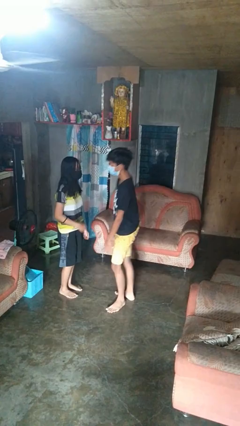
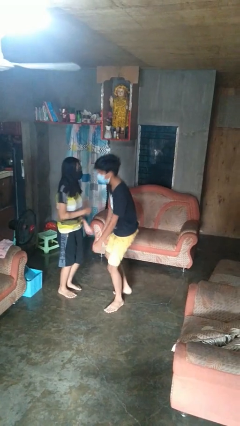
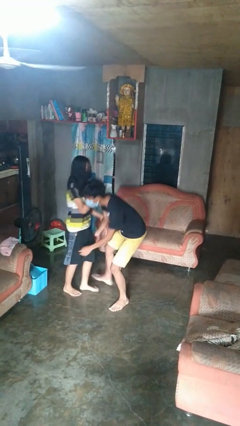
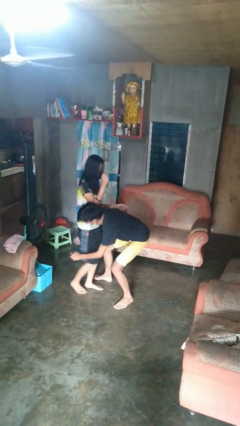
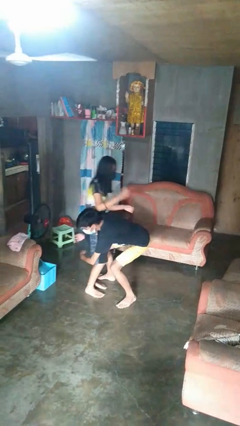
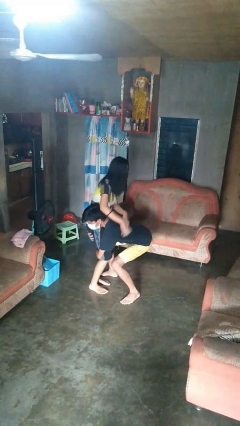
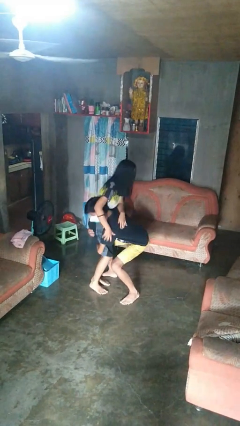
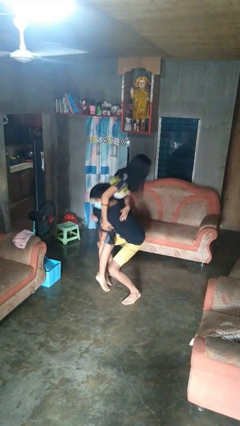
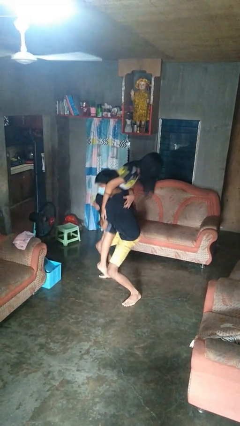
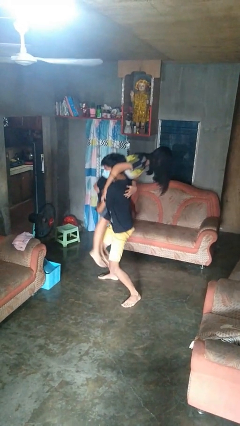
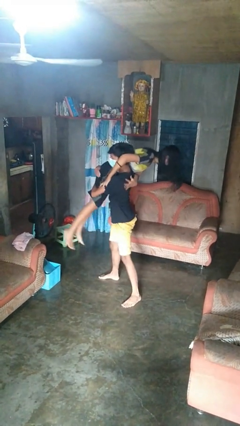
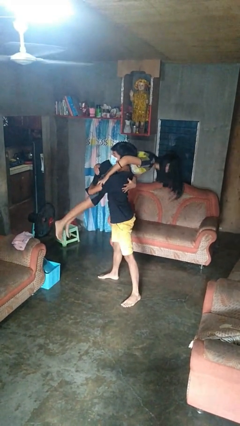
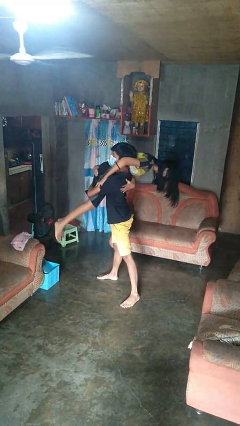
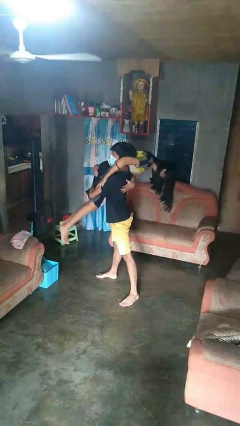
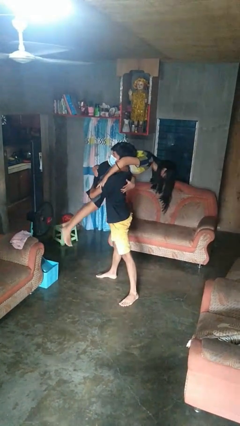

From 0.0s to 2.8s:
person carries person over shoulder

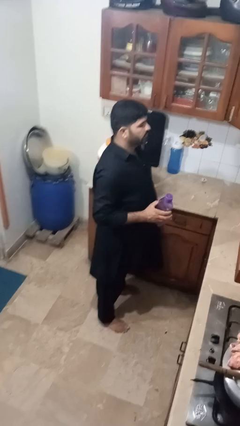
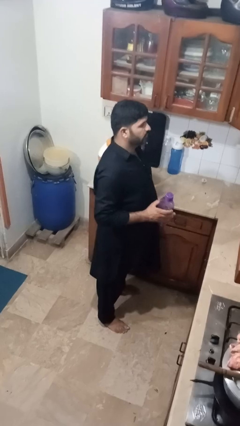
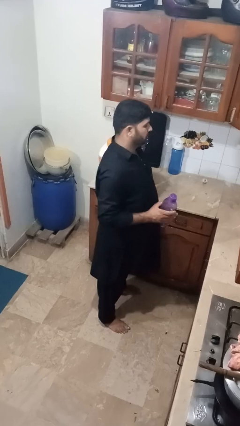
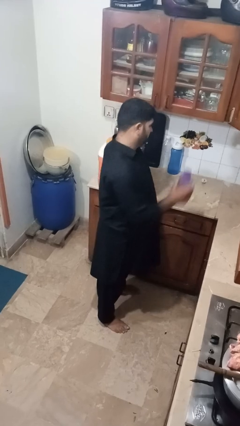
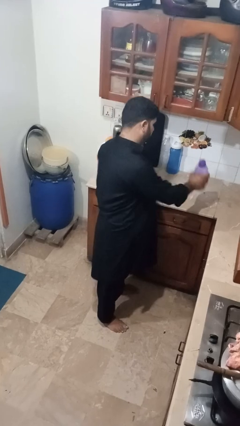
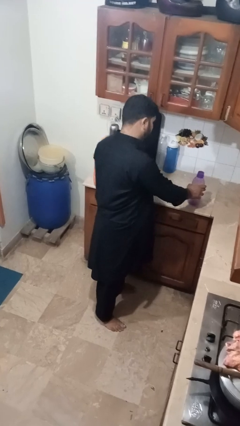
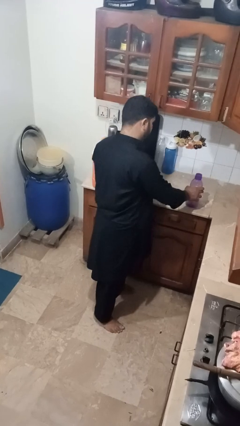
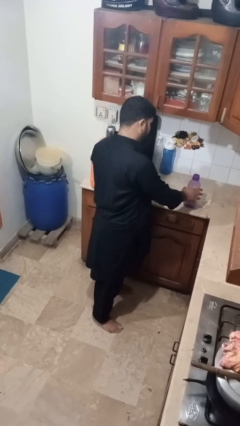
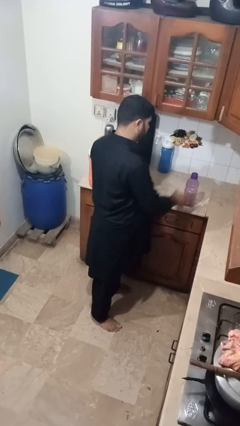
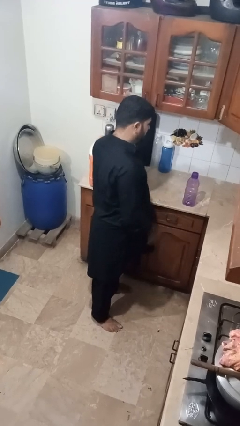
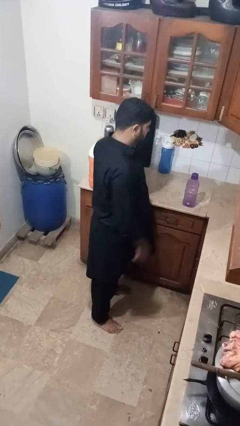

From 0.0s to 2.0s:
person puts down object on countertop

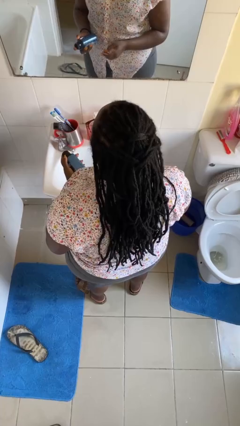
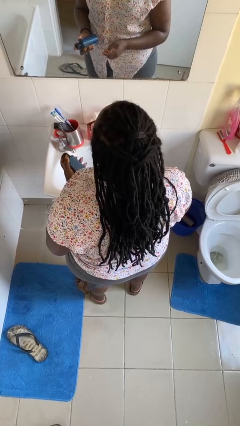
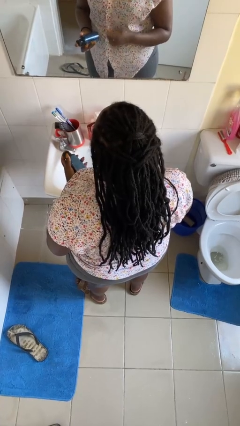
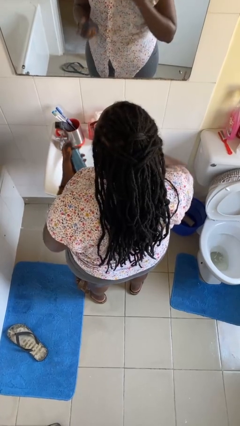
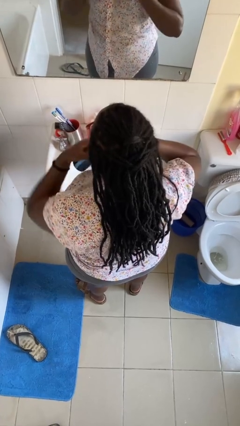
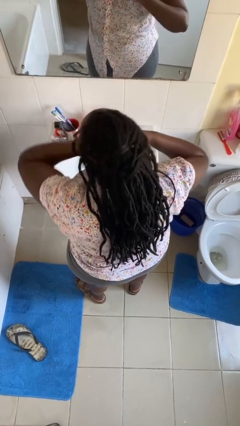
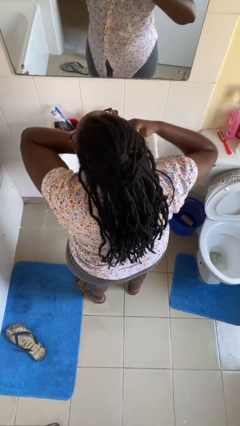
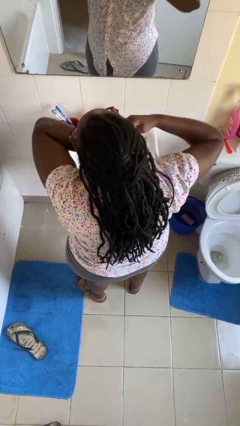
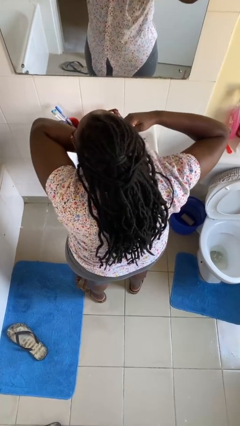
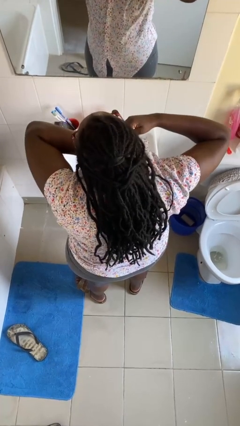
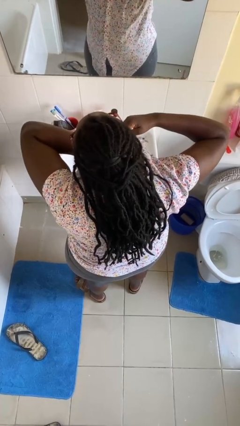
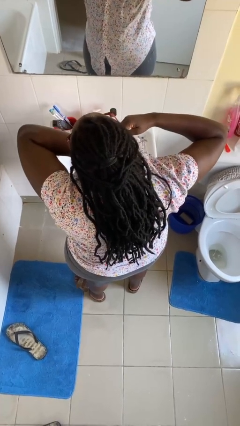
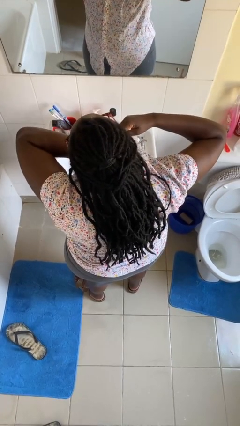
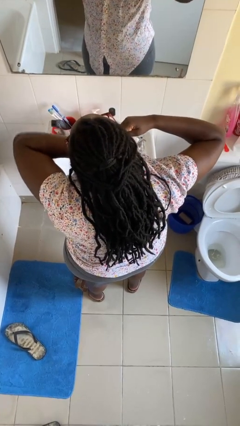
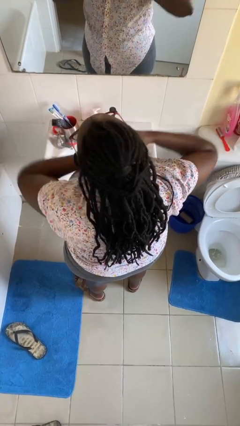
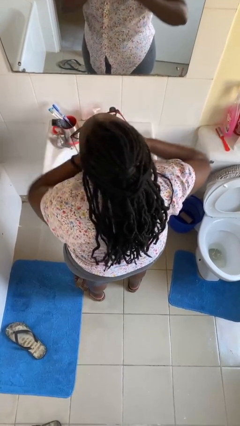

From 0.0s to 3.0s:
person applies deodorant

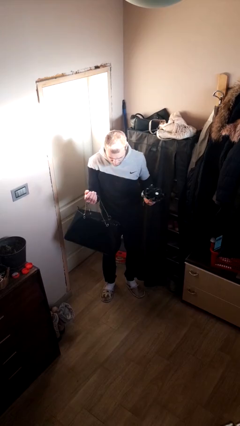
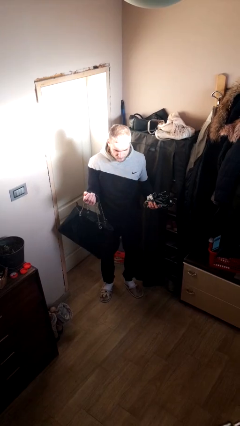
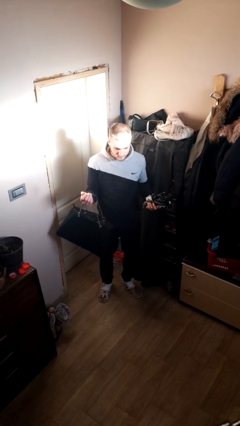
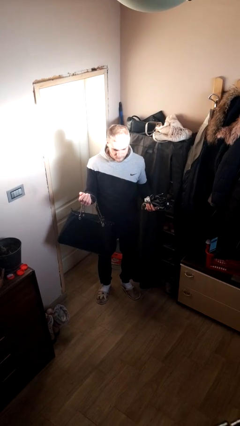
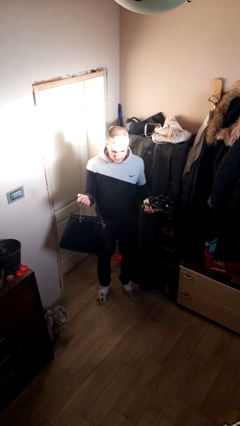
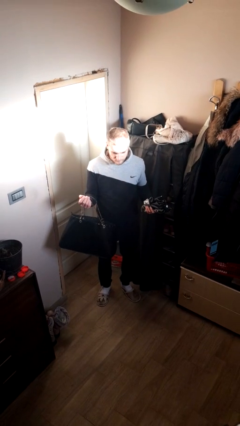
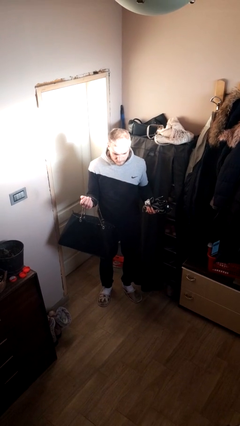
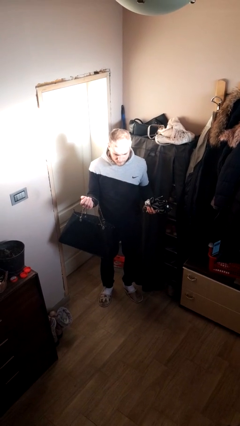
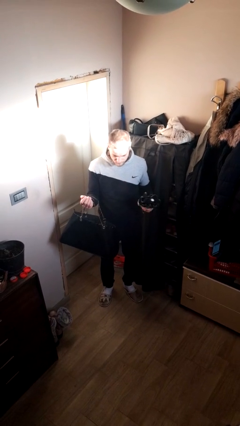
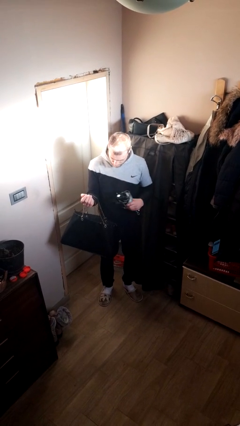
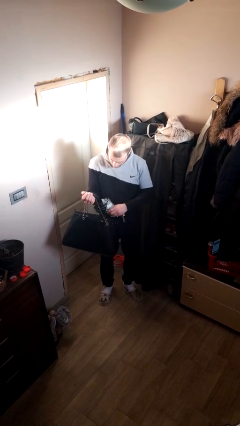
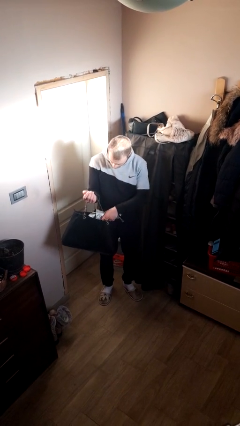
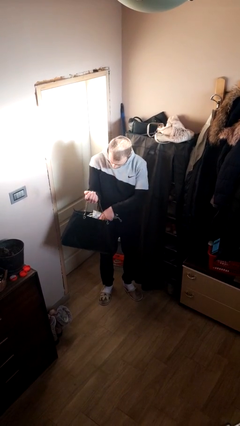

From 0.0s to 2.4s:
person takes object from purse

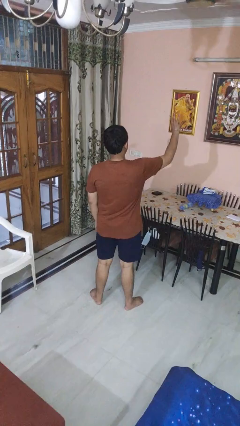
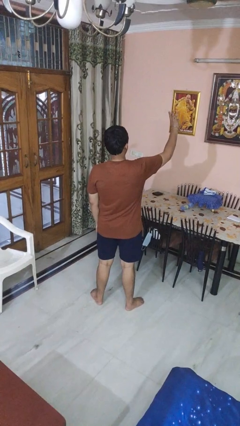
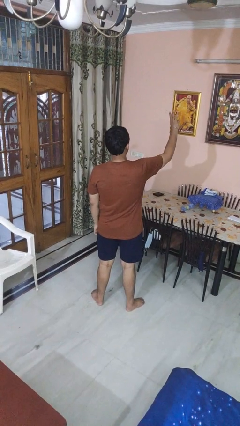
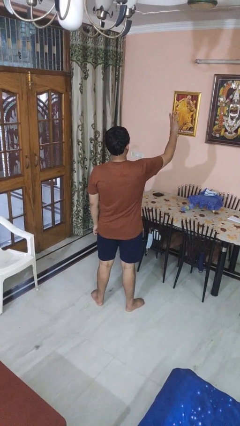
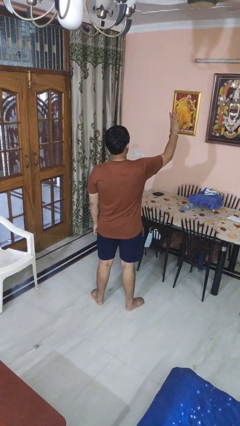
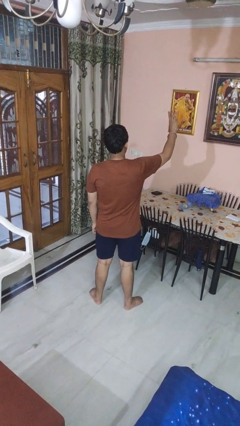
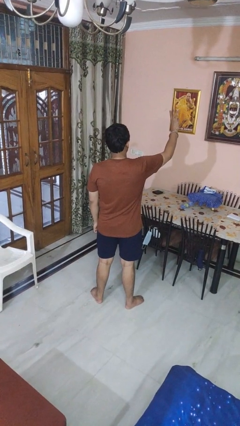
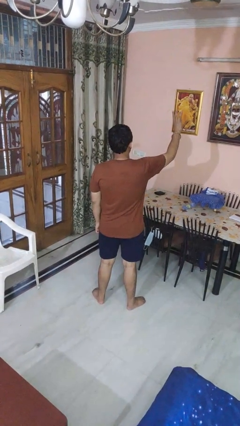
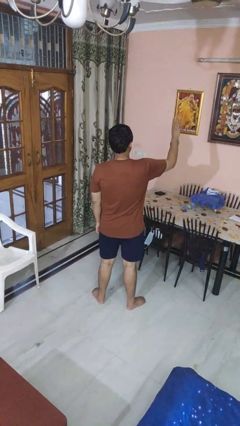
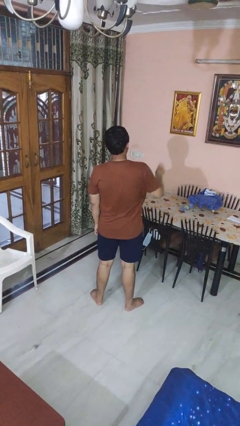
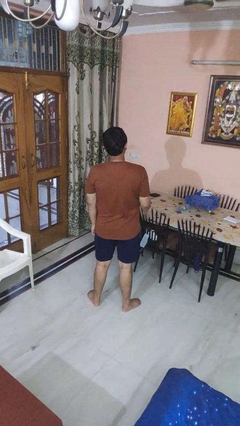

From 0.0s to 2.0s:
person gestures number three

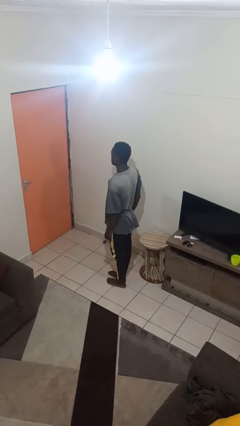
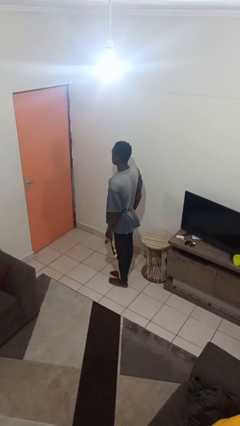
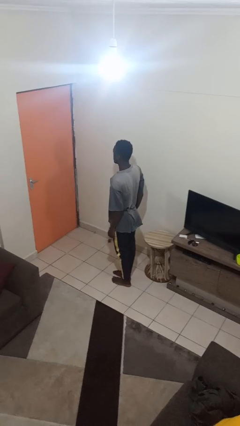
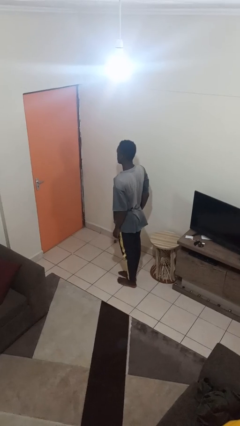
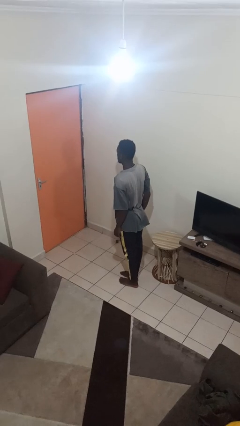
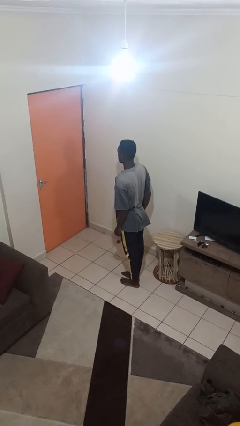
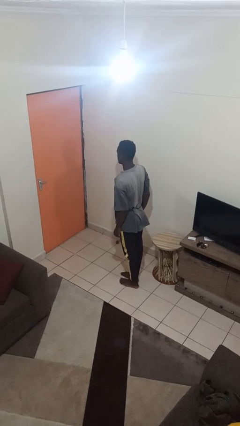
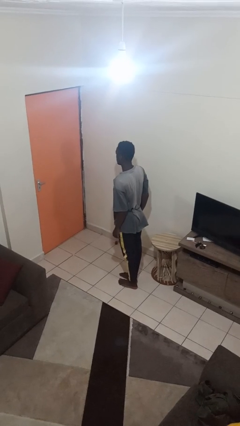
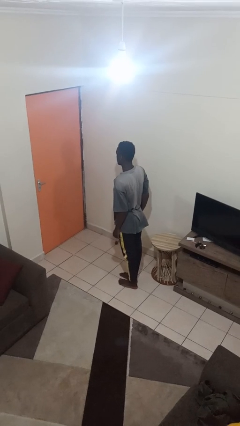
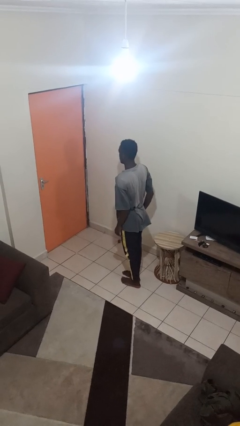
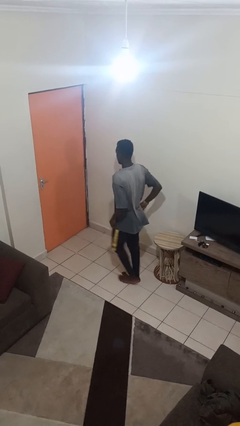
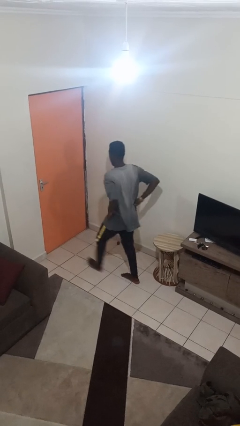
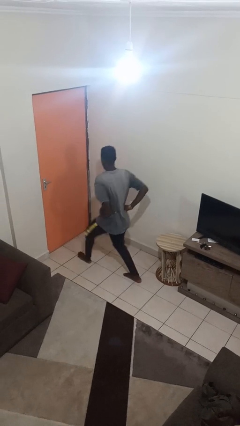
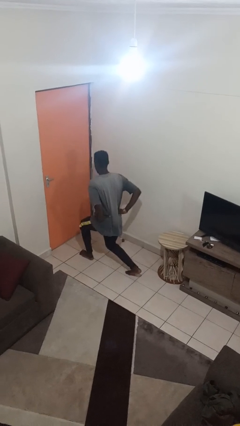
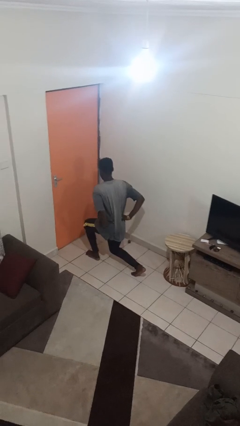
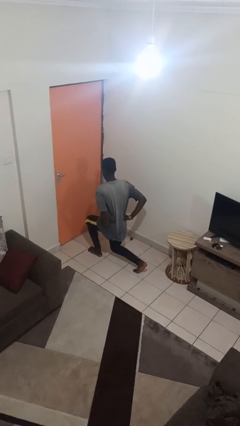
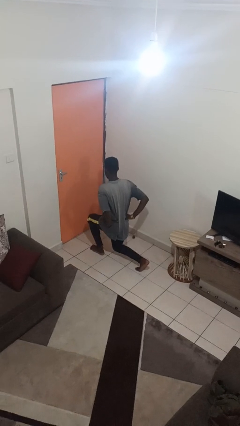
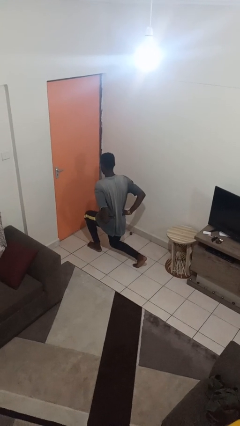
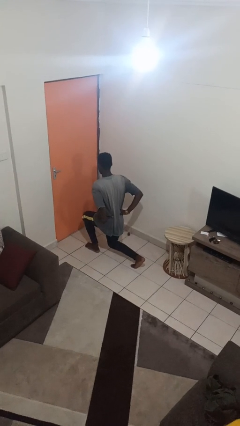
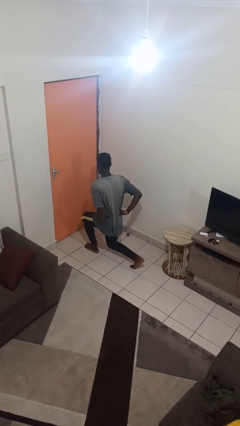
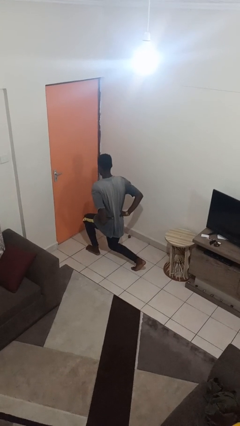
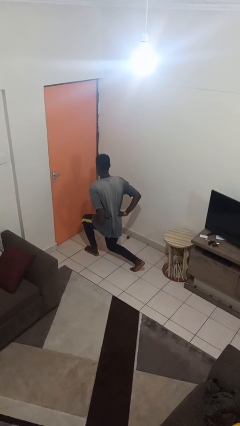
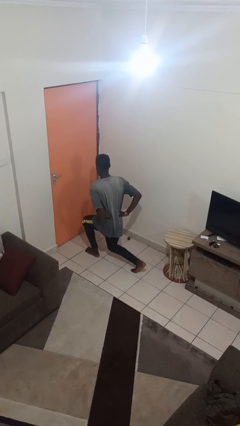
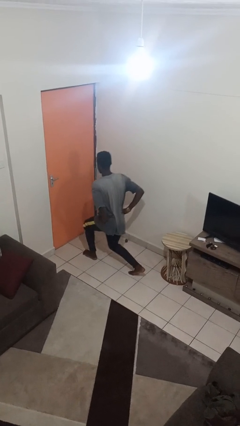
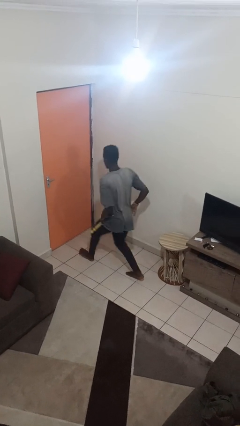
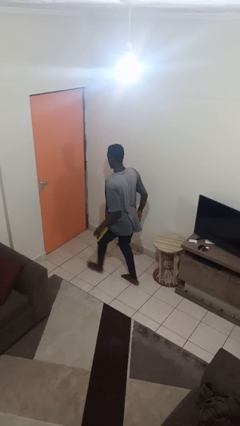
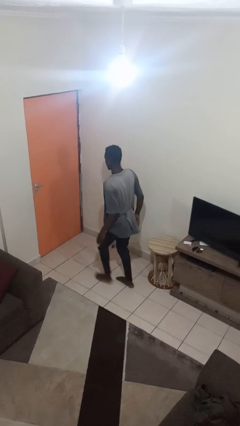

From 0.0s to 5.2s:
person exercises with lunges
